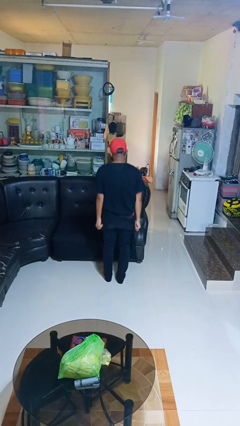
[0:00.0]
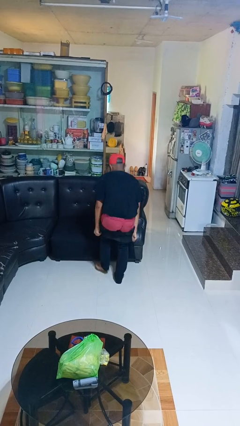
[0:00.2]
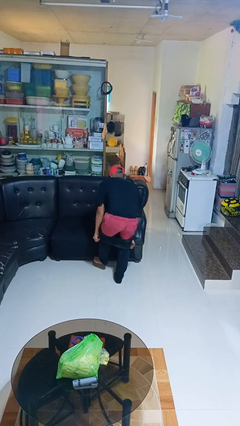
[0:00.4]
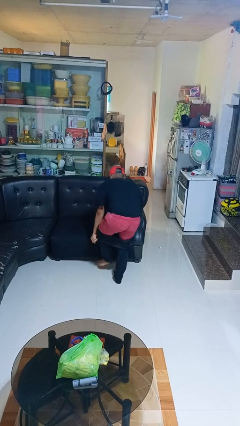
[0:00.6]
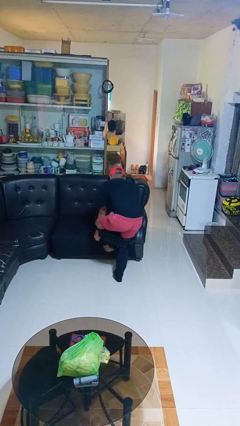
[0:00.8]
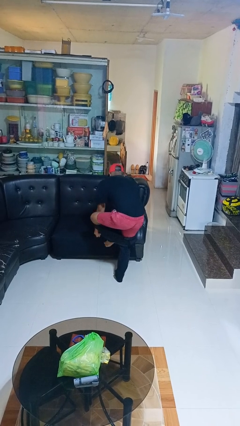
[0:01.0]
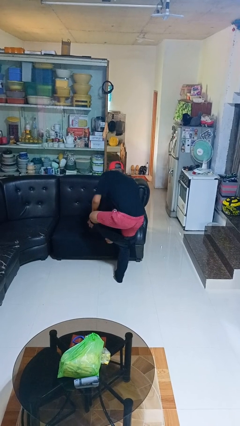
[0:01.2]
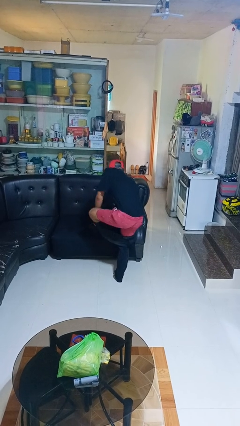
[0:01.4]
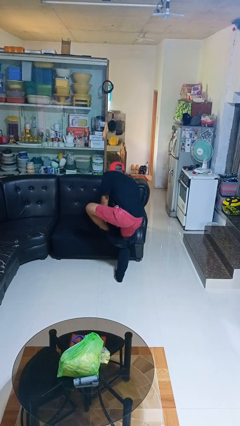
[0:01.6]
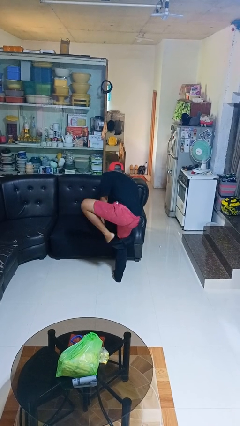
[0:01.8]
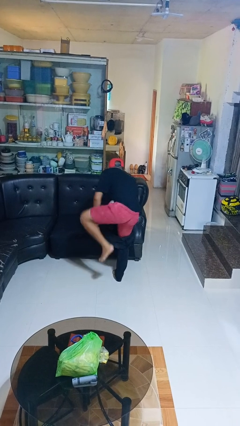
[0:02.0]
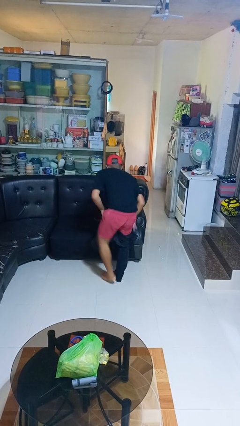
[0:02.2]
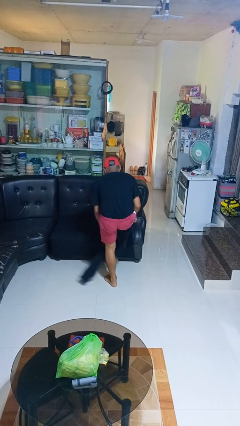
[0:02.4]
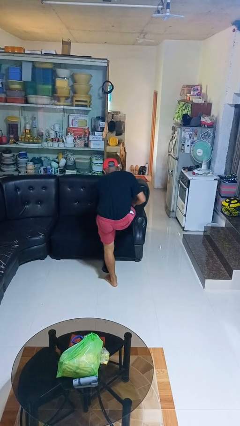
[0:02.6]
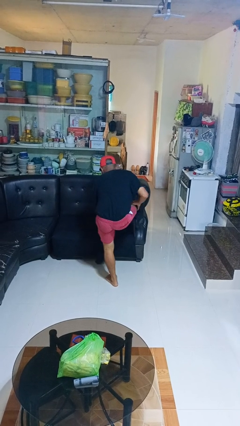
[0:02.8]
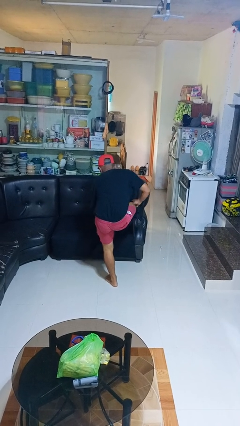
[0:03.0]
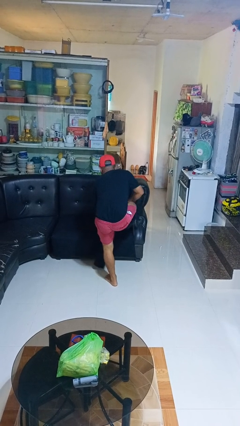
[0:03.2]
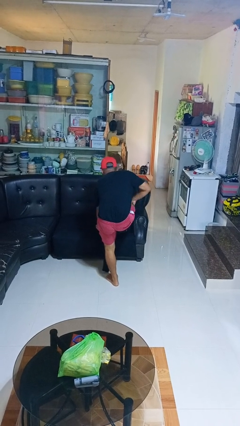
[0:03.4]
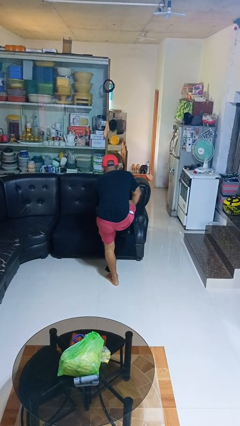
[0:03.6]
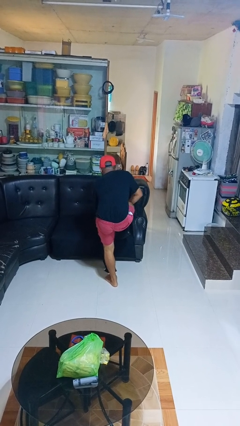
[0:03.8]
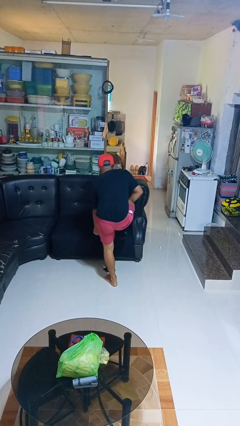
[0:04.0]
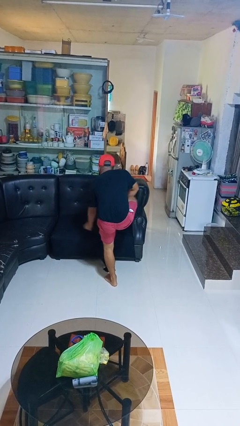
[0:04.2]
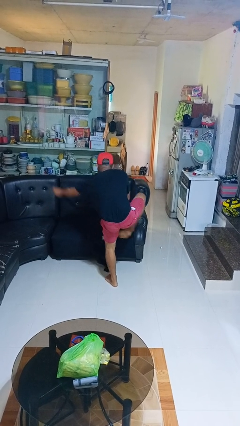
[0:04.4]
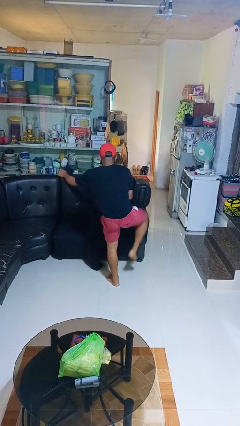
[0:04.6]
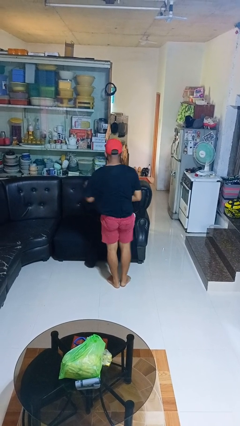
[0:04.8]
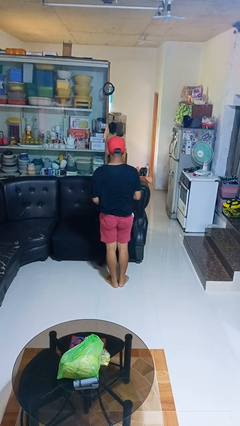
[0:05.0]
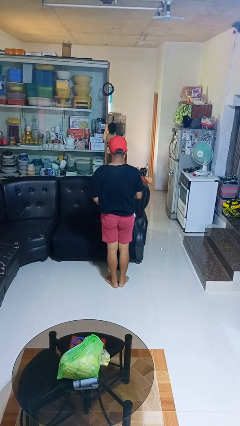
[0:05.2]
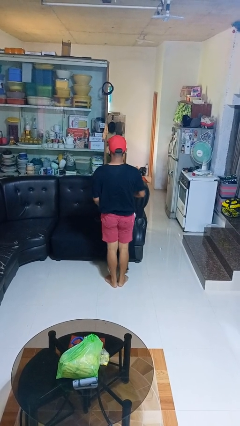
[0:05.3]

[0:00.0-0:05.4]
person takes off pants

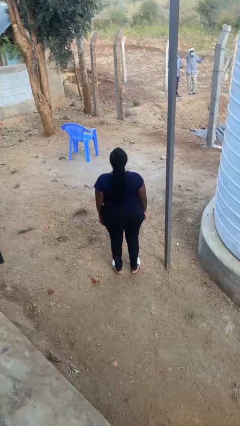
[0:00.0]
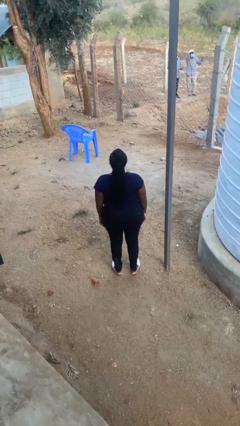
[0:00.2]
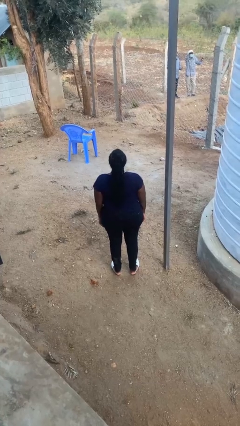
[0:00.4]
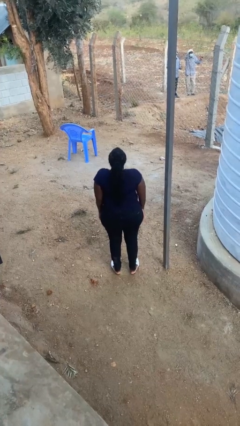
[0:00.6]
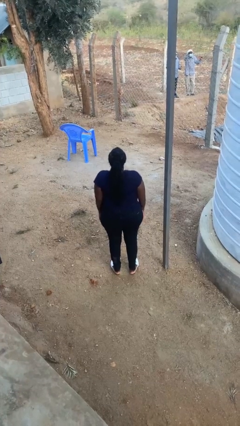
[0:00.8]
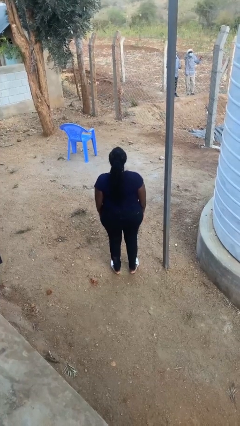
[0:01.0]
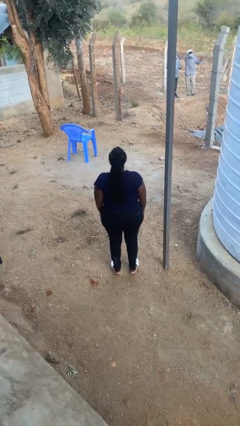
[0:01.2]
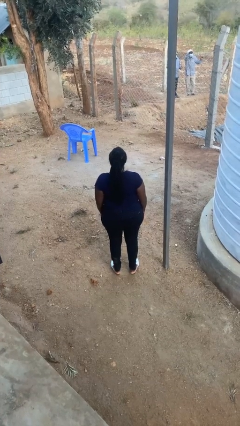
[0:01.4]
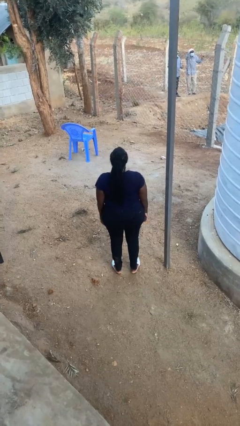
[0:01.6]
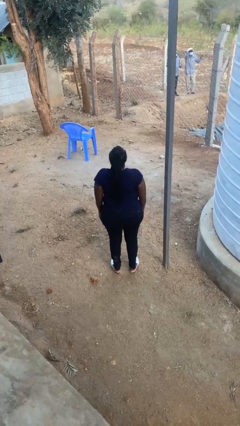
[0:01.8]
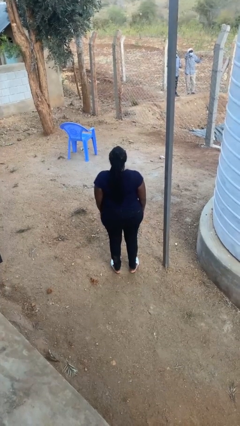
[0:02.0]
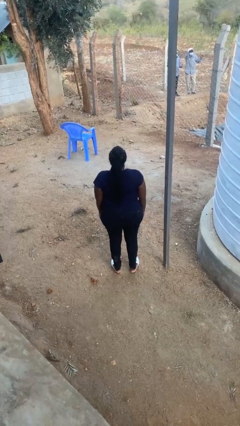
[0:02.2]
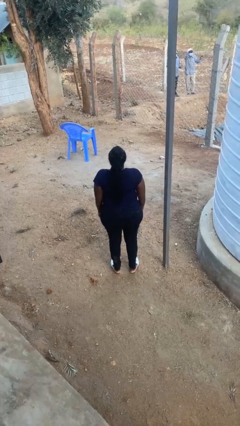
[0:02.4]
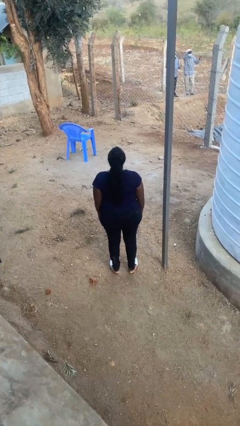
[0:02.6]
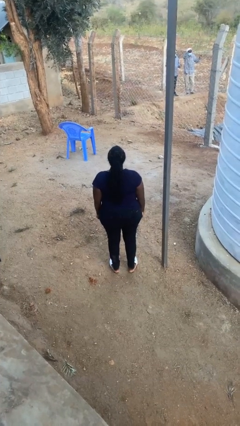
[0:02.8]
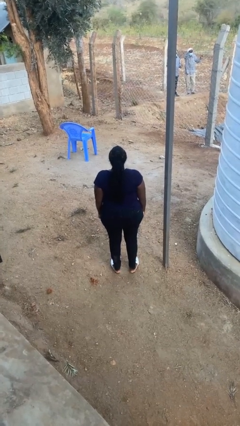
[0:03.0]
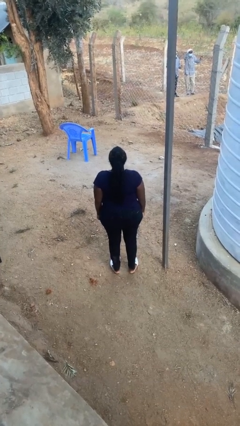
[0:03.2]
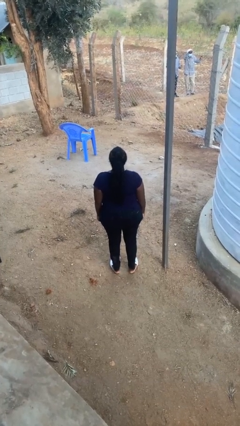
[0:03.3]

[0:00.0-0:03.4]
person shrugs

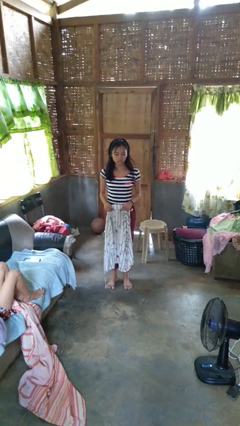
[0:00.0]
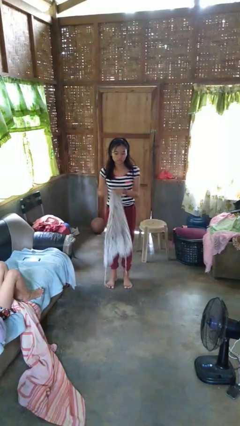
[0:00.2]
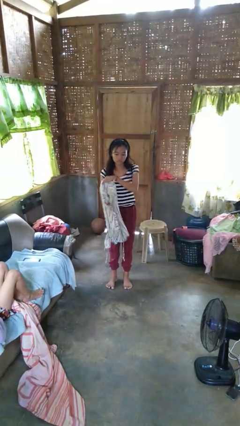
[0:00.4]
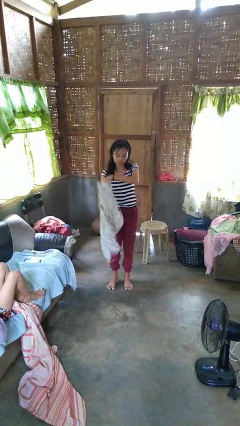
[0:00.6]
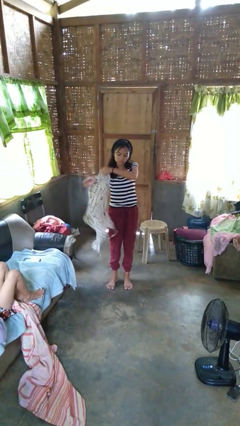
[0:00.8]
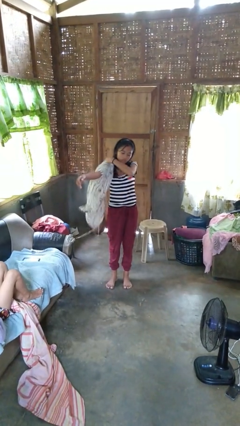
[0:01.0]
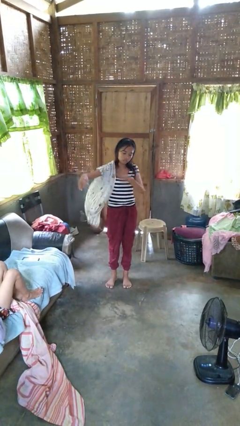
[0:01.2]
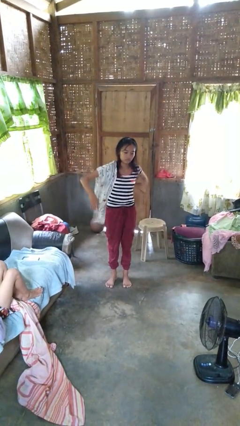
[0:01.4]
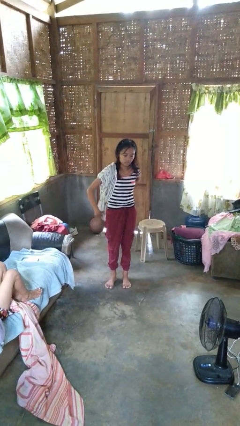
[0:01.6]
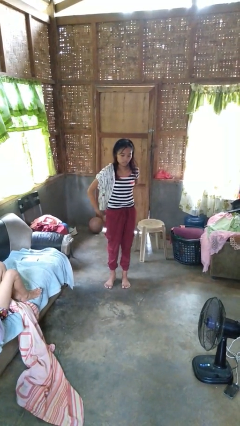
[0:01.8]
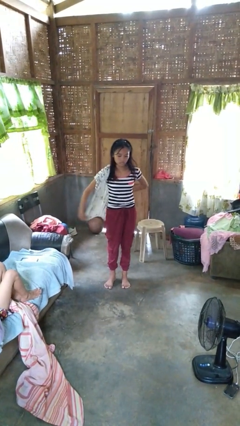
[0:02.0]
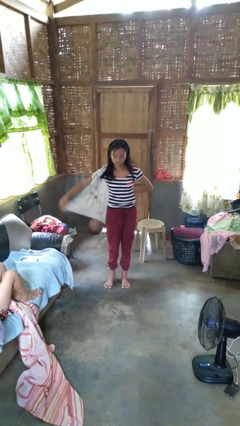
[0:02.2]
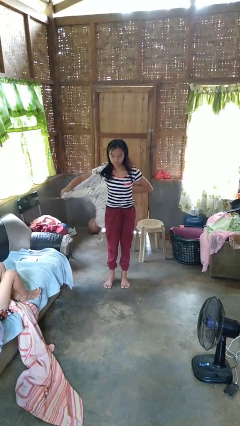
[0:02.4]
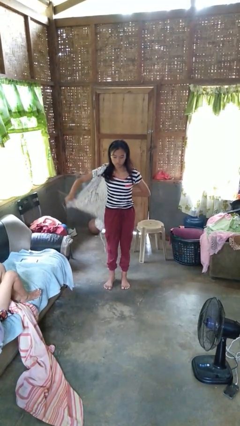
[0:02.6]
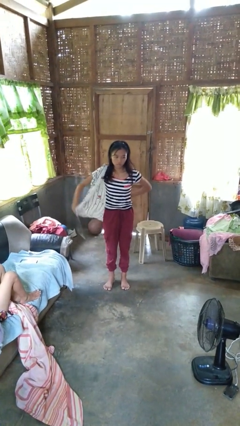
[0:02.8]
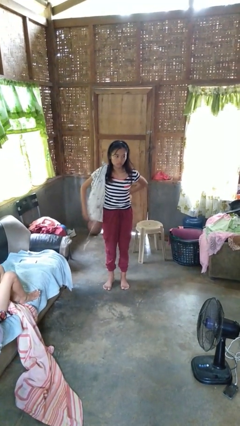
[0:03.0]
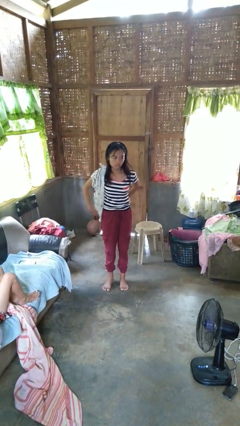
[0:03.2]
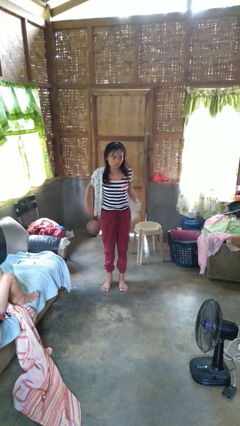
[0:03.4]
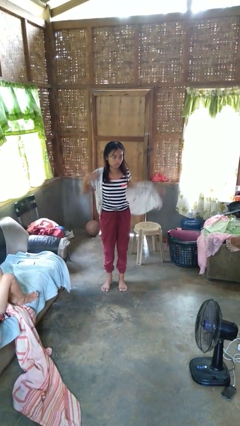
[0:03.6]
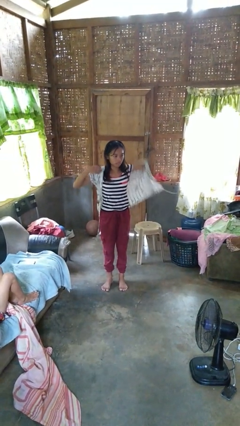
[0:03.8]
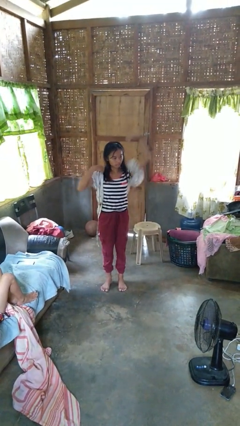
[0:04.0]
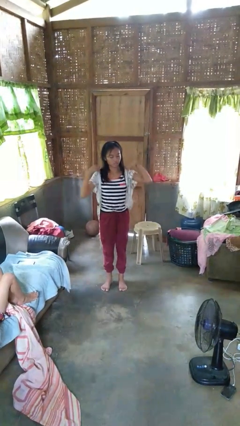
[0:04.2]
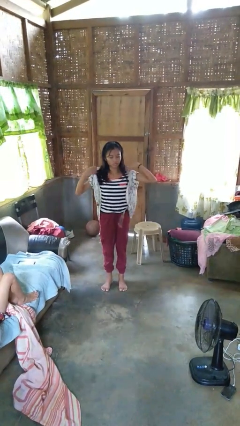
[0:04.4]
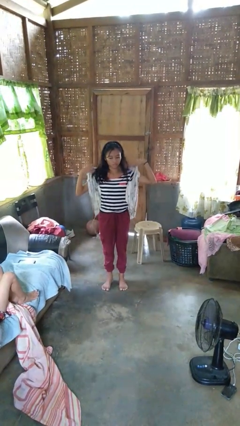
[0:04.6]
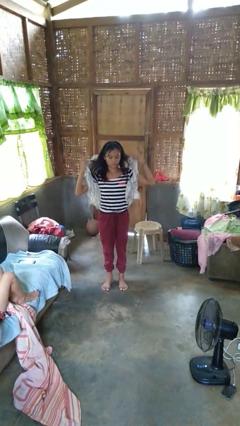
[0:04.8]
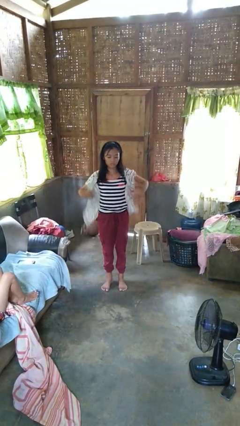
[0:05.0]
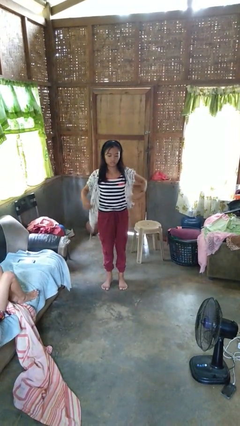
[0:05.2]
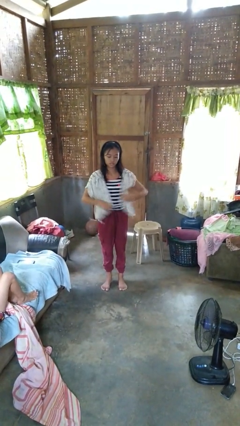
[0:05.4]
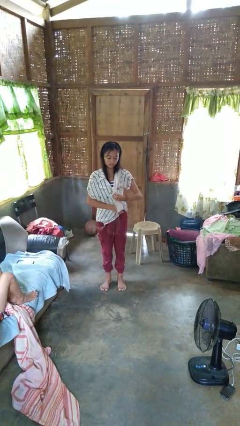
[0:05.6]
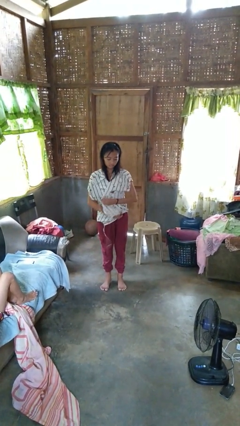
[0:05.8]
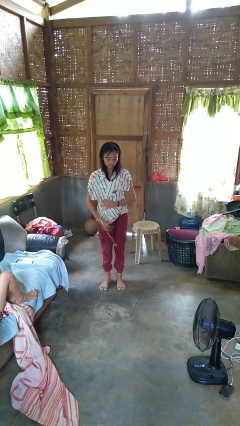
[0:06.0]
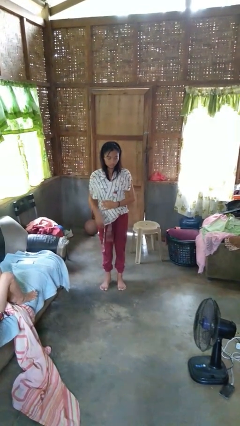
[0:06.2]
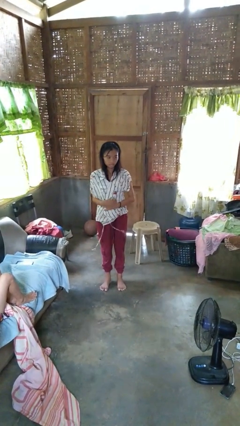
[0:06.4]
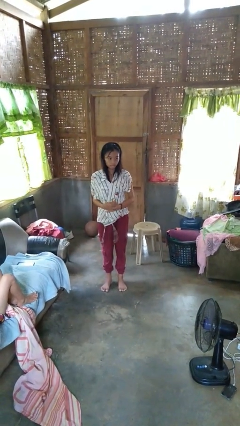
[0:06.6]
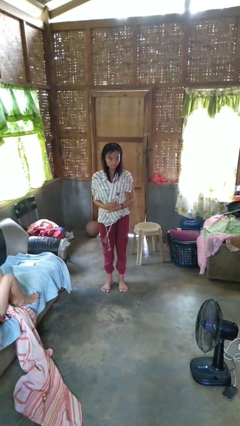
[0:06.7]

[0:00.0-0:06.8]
person puts on shirt

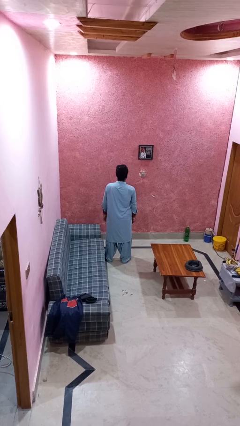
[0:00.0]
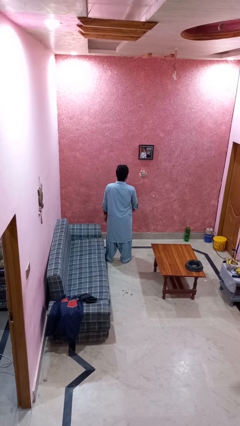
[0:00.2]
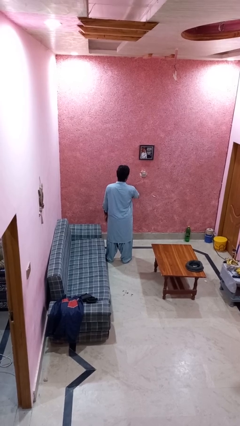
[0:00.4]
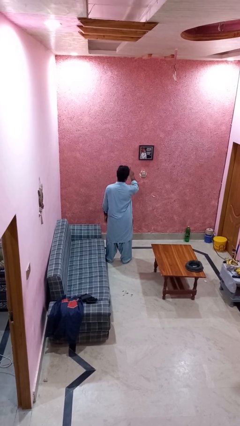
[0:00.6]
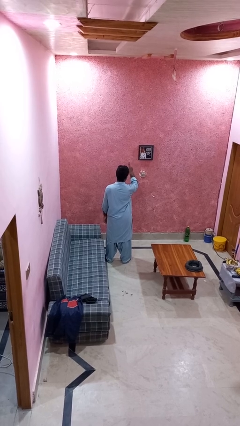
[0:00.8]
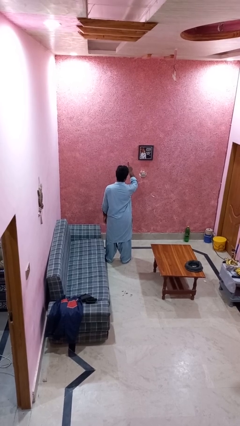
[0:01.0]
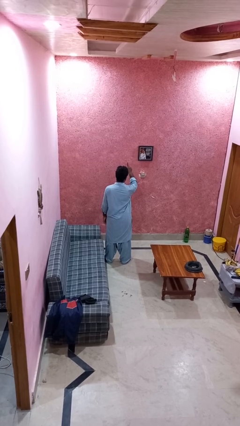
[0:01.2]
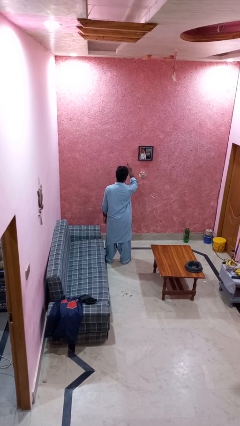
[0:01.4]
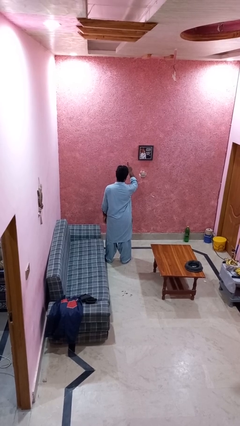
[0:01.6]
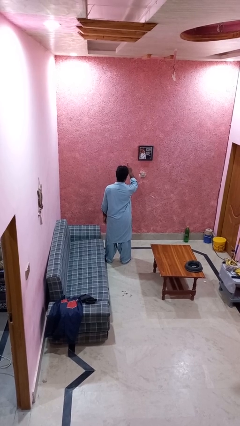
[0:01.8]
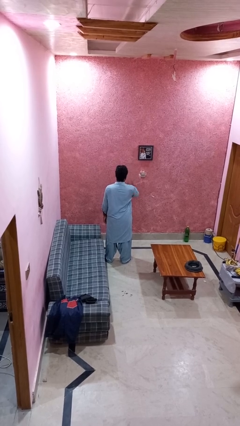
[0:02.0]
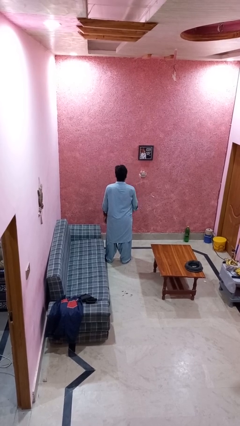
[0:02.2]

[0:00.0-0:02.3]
person gestures number one
